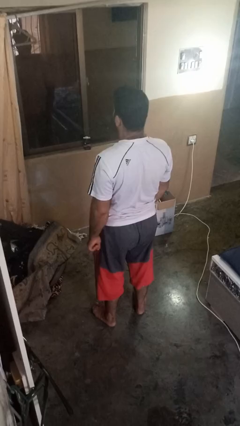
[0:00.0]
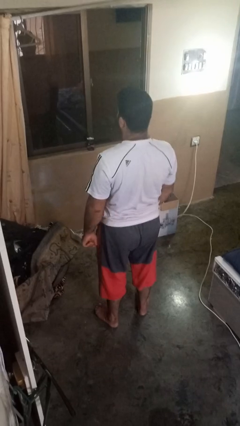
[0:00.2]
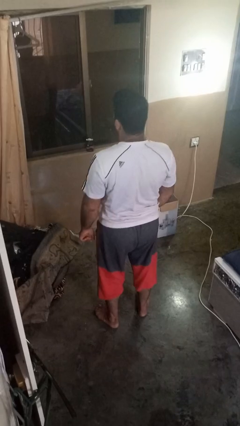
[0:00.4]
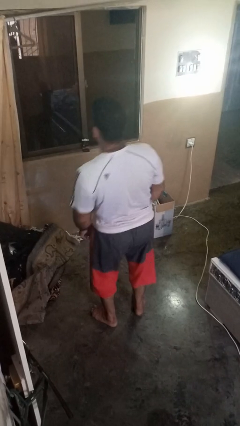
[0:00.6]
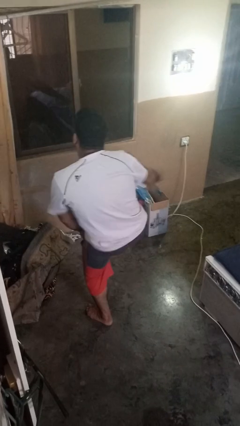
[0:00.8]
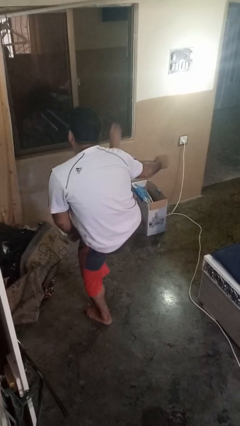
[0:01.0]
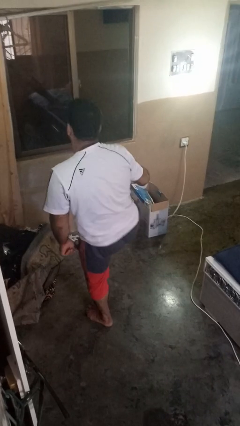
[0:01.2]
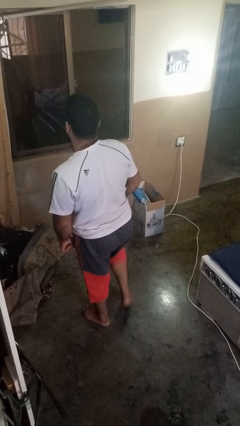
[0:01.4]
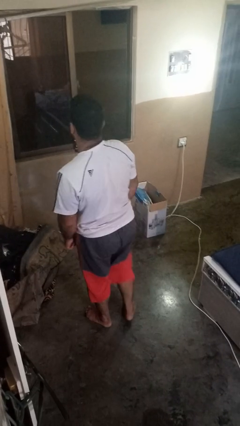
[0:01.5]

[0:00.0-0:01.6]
person karate kicks

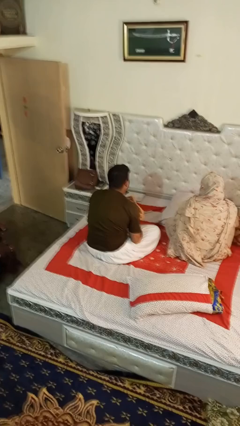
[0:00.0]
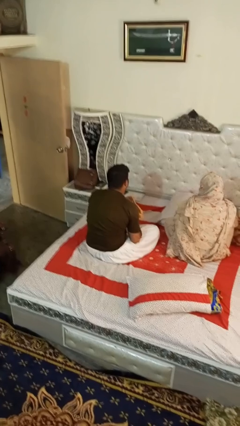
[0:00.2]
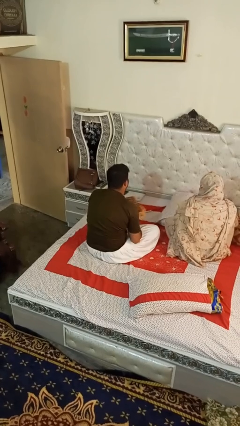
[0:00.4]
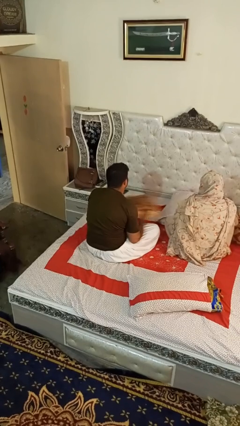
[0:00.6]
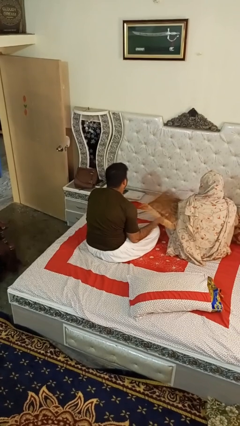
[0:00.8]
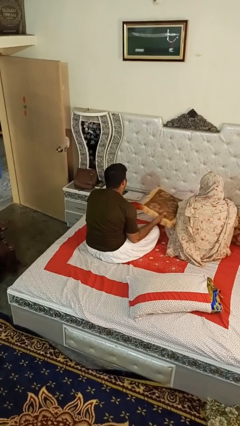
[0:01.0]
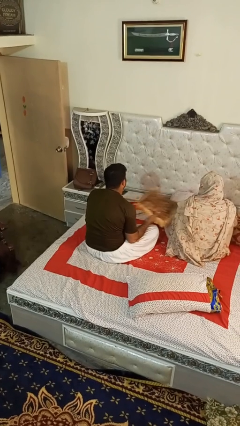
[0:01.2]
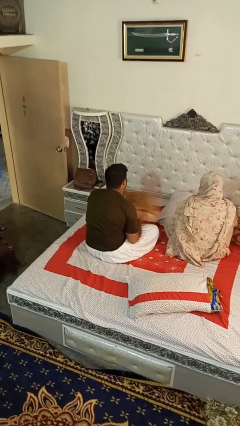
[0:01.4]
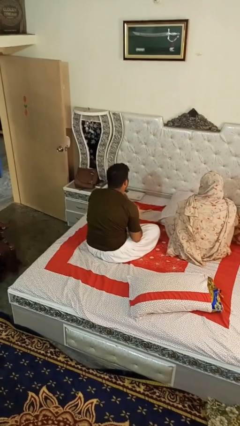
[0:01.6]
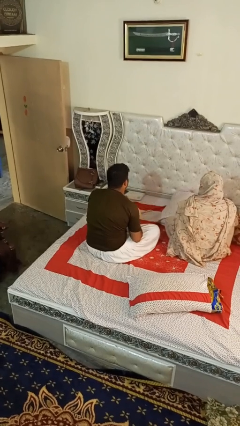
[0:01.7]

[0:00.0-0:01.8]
person hits person with pillow

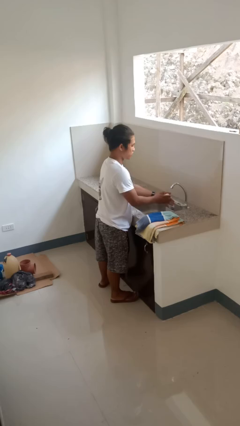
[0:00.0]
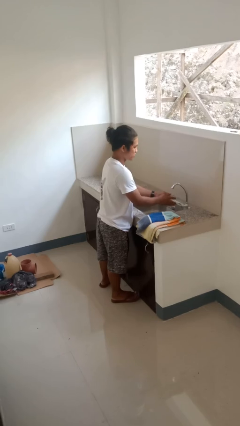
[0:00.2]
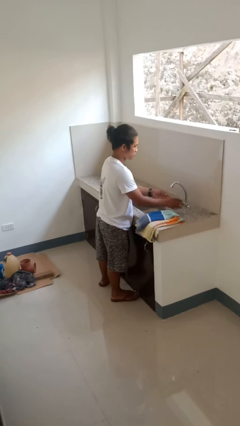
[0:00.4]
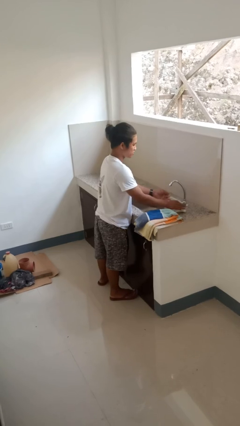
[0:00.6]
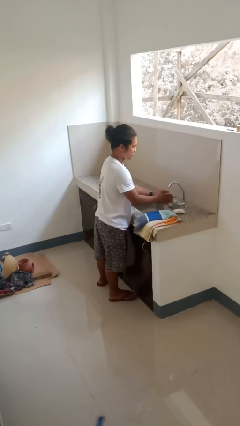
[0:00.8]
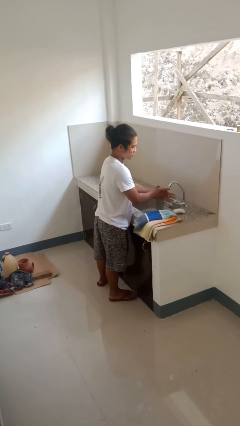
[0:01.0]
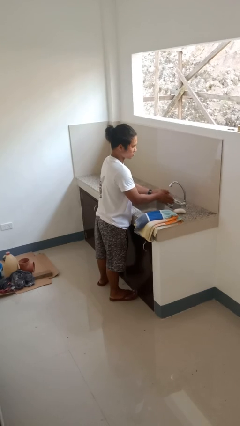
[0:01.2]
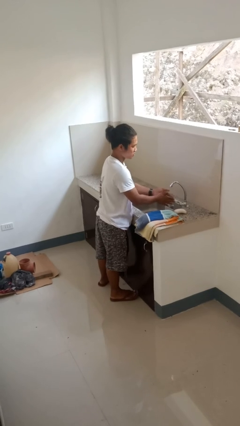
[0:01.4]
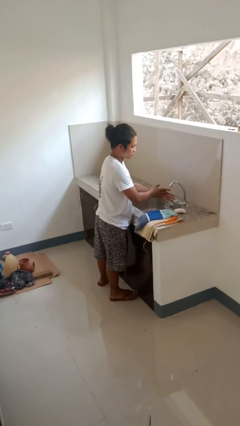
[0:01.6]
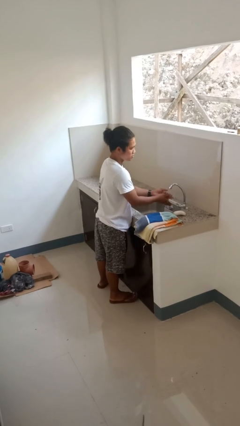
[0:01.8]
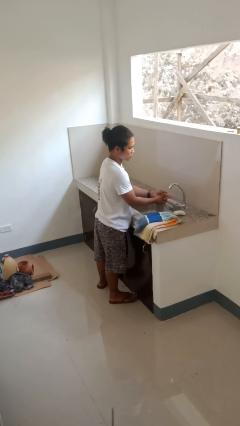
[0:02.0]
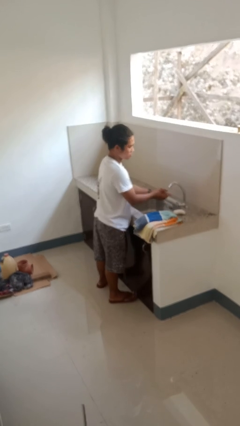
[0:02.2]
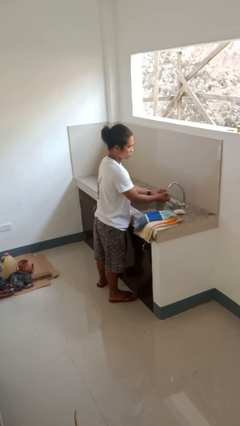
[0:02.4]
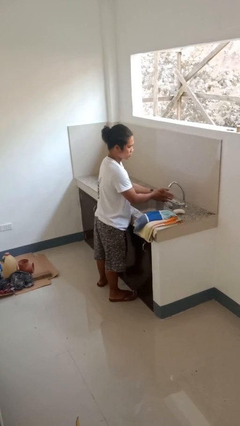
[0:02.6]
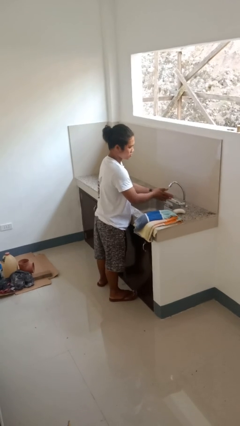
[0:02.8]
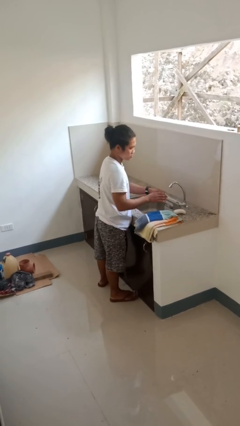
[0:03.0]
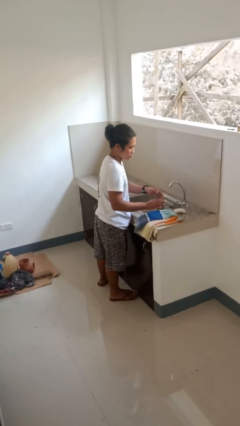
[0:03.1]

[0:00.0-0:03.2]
person washes hands

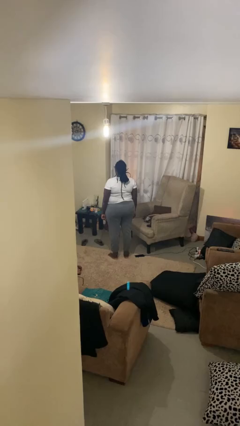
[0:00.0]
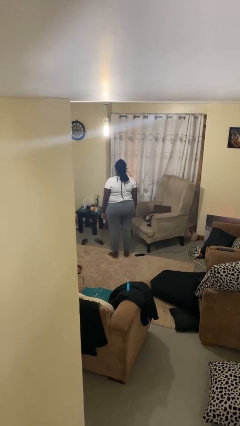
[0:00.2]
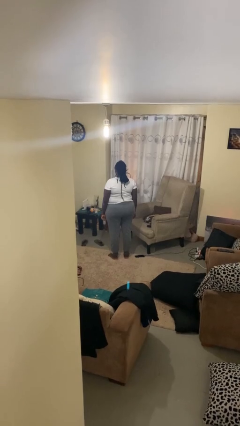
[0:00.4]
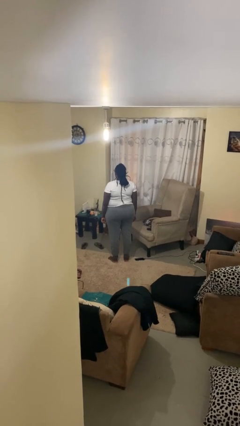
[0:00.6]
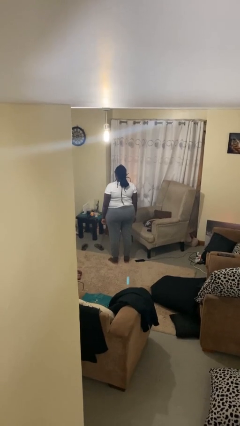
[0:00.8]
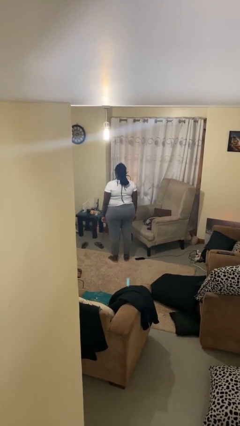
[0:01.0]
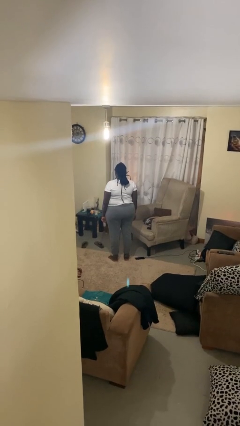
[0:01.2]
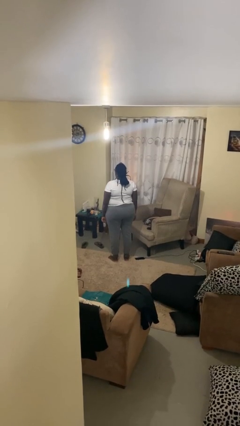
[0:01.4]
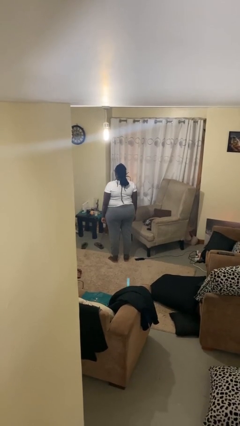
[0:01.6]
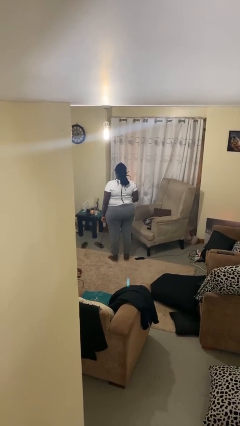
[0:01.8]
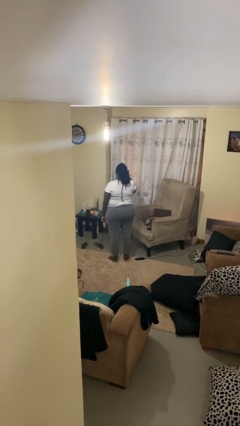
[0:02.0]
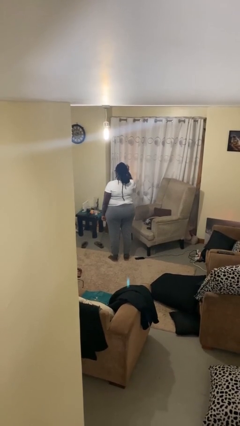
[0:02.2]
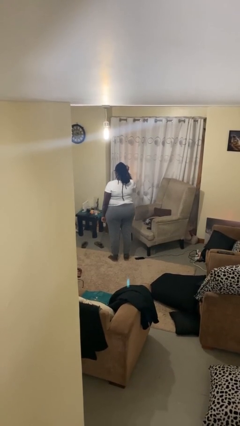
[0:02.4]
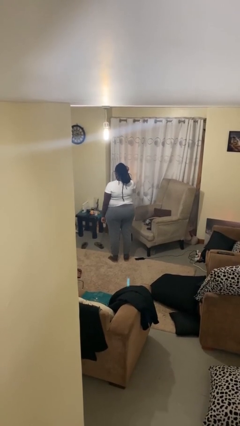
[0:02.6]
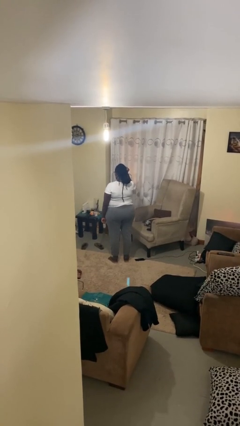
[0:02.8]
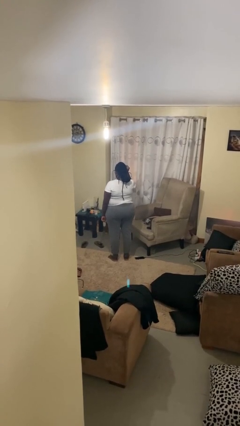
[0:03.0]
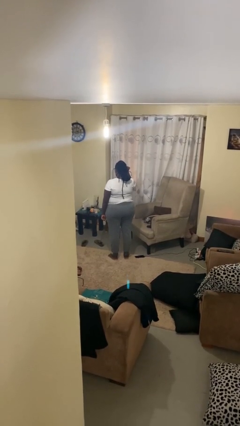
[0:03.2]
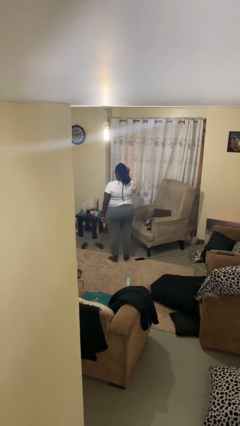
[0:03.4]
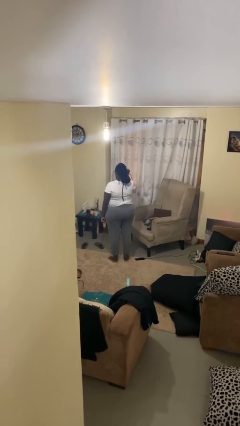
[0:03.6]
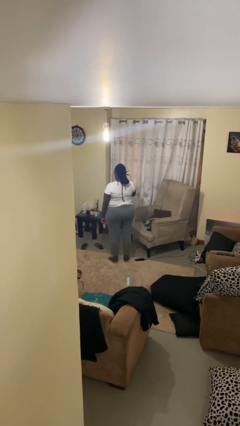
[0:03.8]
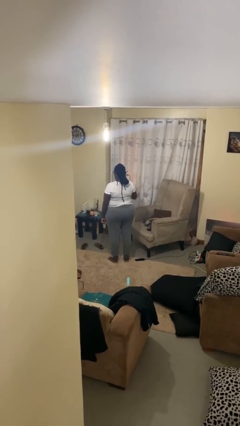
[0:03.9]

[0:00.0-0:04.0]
person snaps fingers

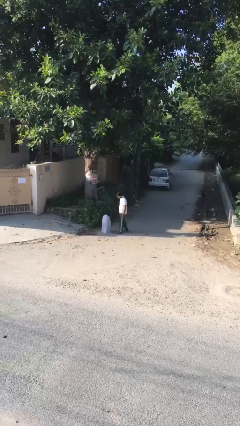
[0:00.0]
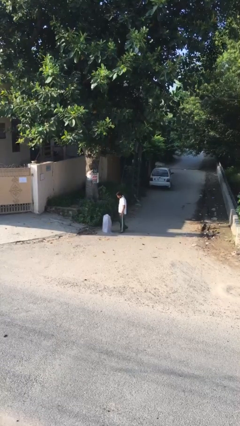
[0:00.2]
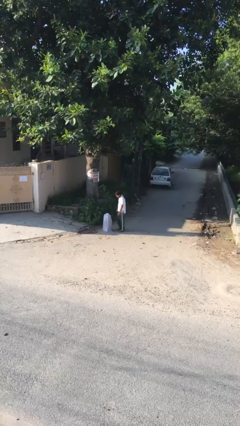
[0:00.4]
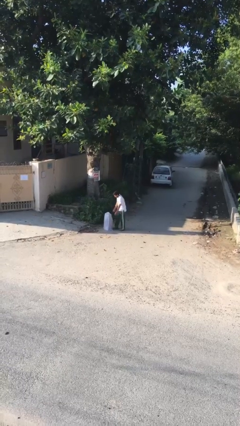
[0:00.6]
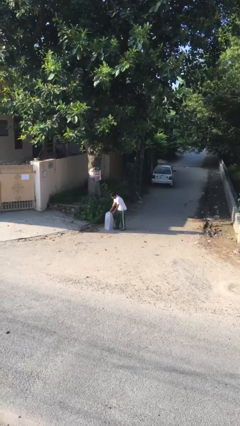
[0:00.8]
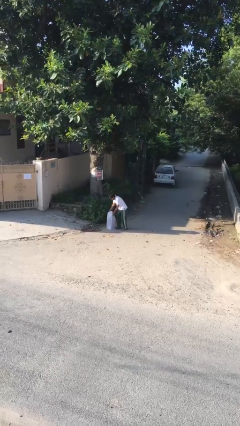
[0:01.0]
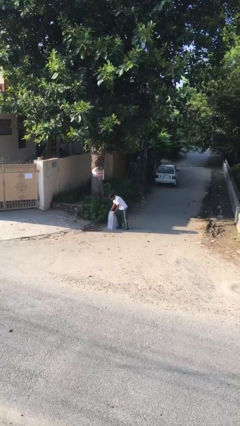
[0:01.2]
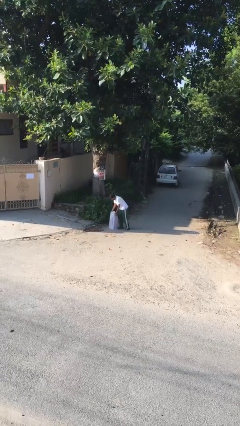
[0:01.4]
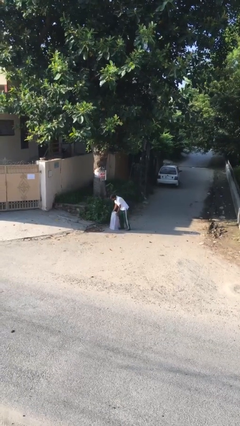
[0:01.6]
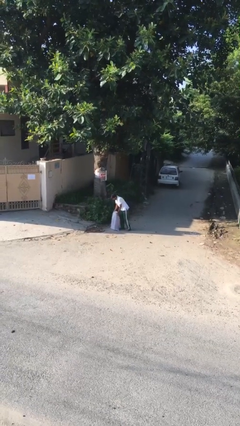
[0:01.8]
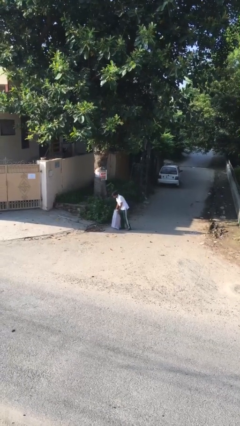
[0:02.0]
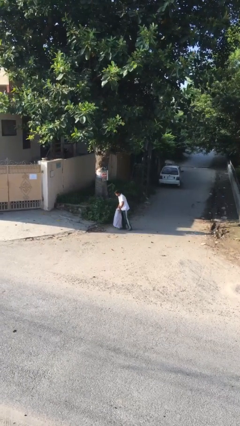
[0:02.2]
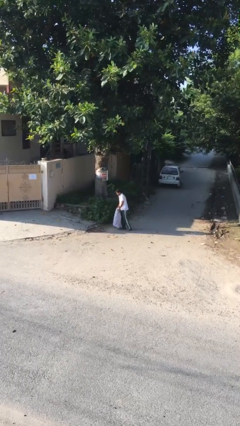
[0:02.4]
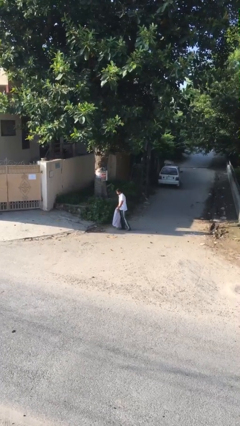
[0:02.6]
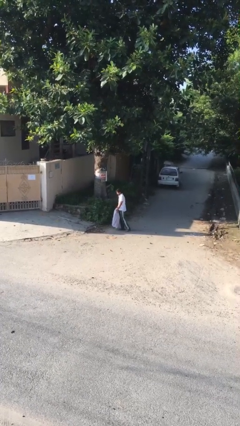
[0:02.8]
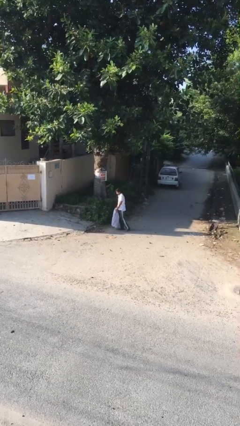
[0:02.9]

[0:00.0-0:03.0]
person picks up object from floor

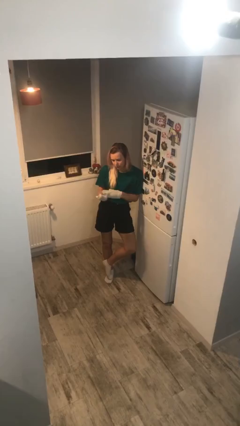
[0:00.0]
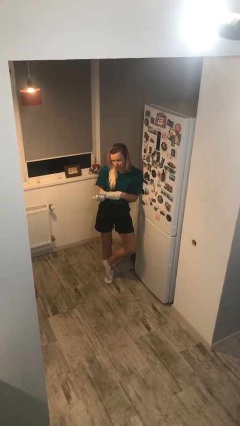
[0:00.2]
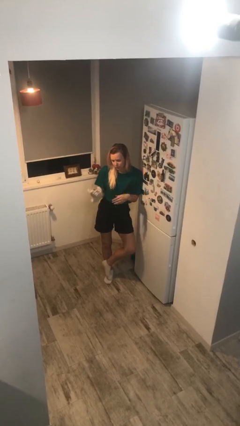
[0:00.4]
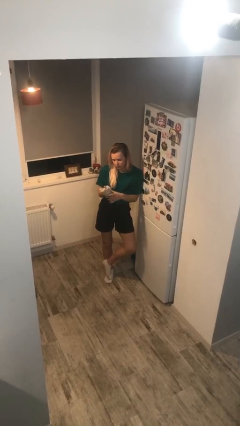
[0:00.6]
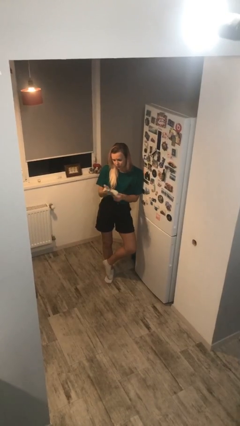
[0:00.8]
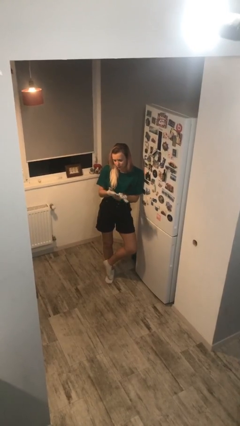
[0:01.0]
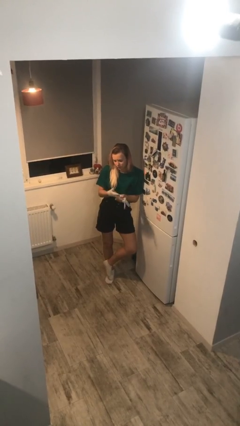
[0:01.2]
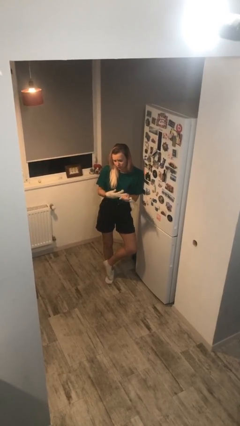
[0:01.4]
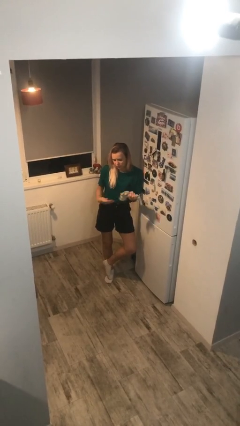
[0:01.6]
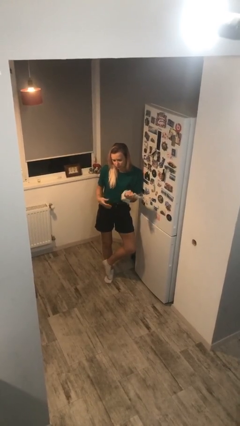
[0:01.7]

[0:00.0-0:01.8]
person takes off gloves

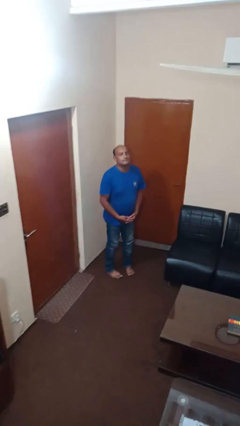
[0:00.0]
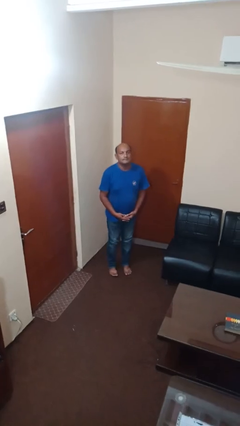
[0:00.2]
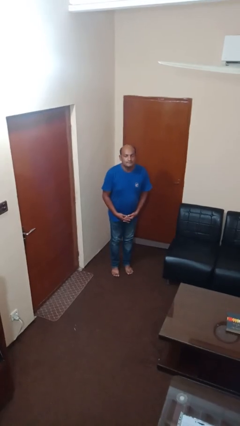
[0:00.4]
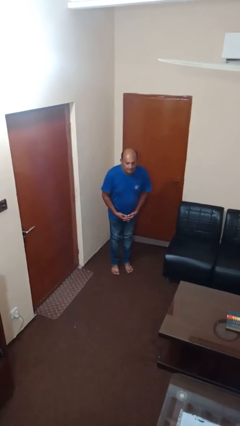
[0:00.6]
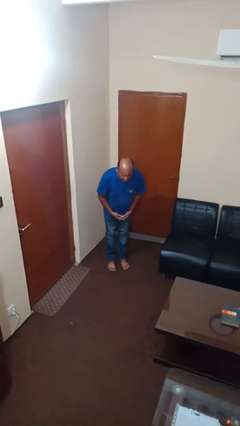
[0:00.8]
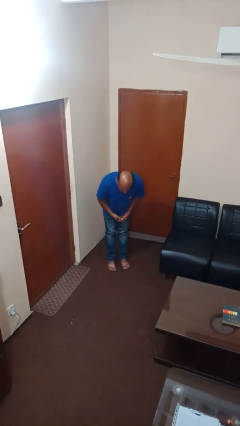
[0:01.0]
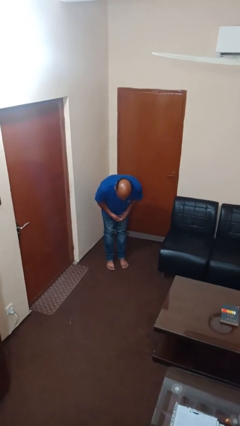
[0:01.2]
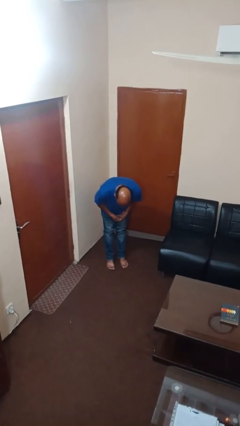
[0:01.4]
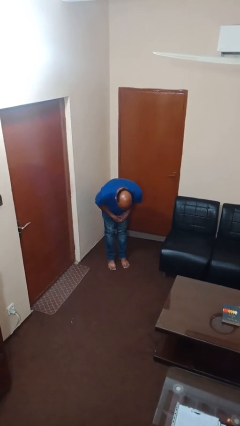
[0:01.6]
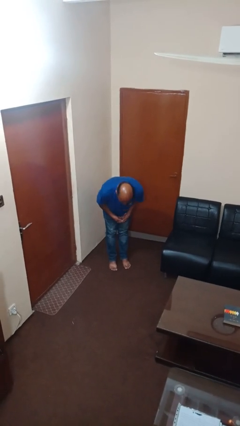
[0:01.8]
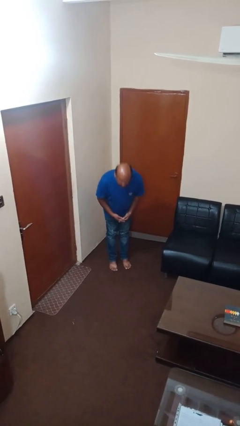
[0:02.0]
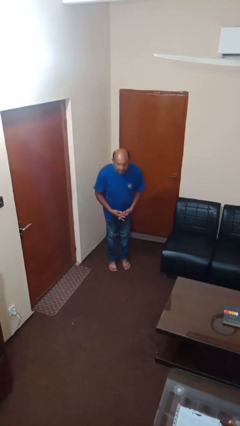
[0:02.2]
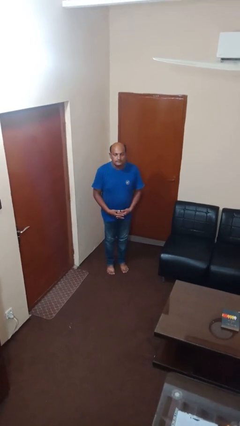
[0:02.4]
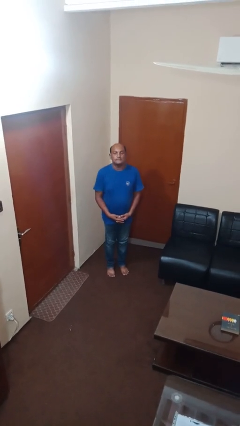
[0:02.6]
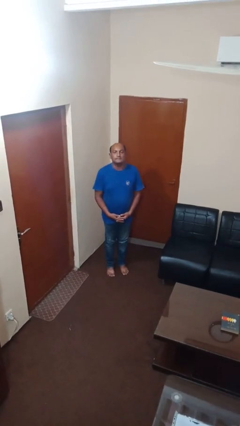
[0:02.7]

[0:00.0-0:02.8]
person bows
